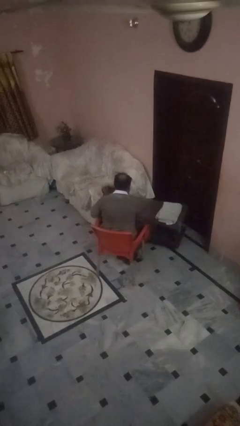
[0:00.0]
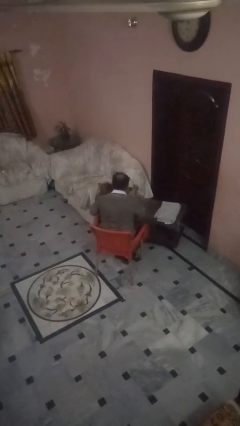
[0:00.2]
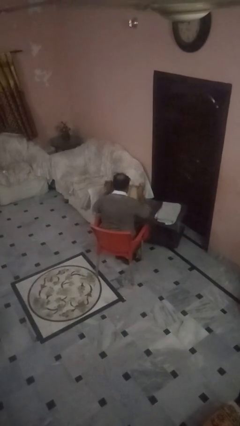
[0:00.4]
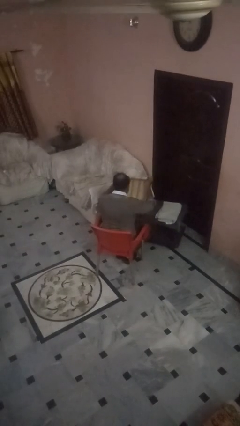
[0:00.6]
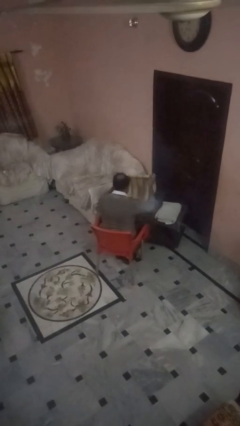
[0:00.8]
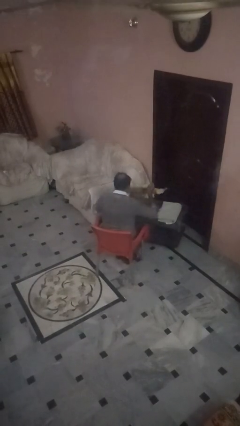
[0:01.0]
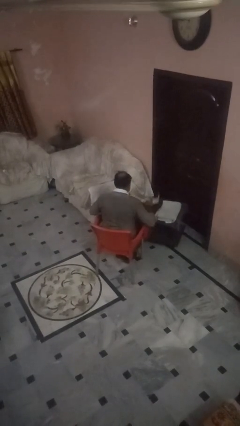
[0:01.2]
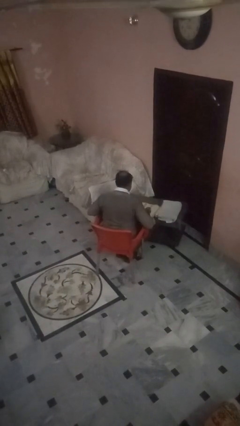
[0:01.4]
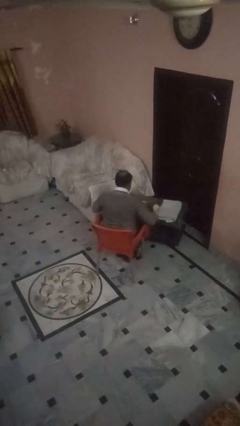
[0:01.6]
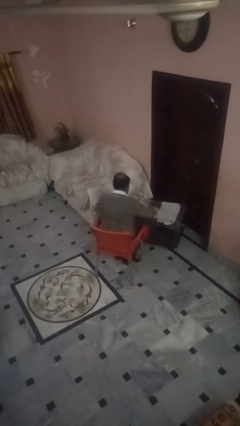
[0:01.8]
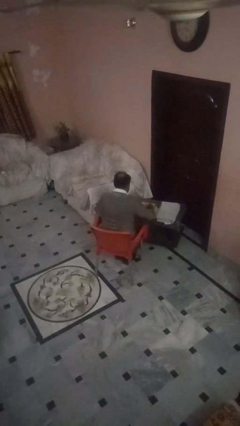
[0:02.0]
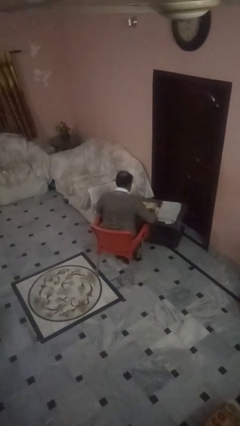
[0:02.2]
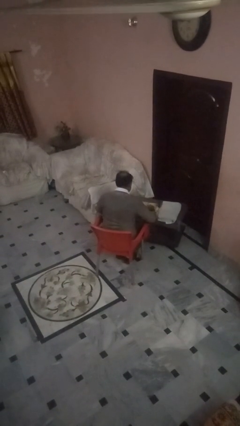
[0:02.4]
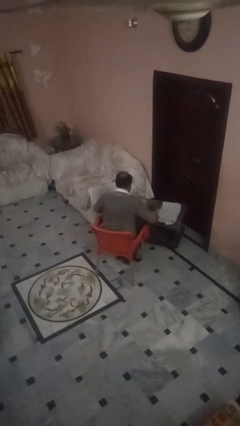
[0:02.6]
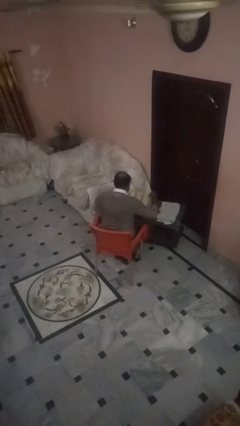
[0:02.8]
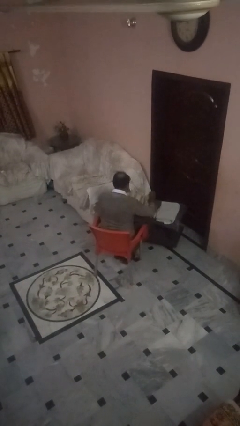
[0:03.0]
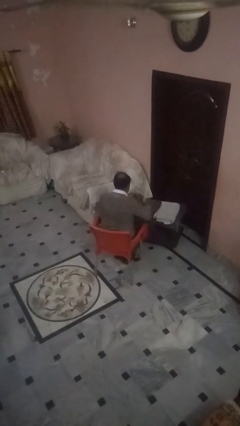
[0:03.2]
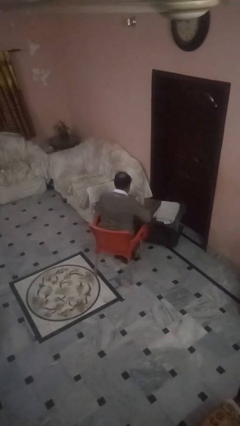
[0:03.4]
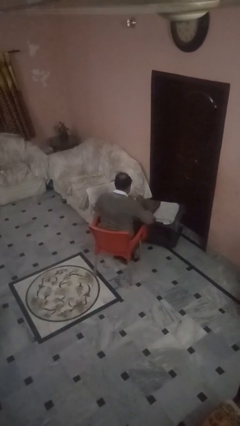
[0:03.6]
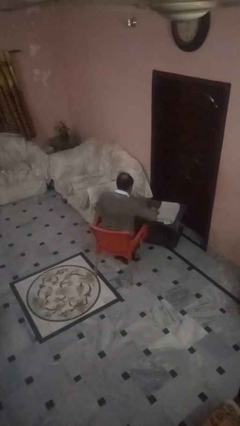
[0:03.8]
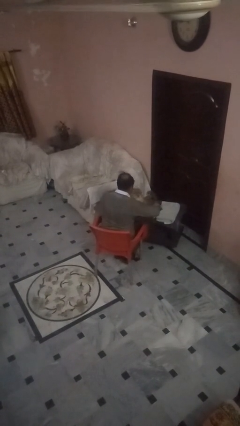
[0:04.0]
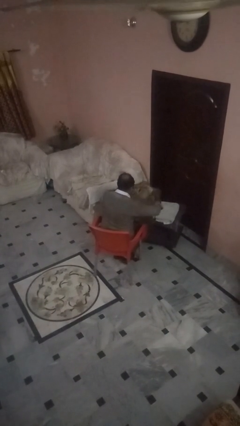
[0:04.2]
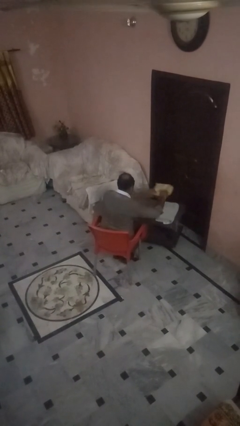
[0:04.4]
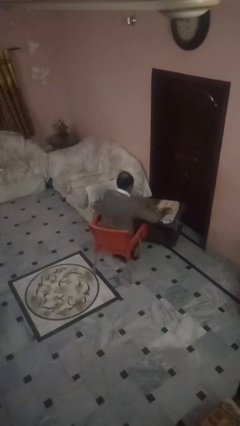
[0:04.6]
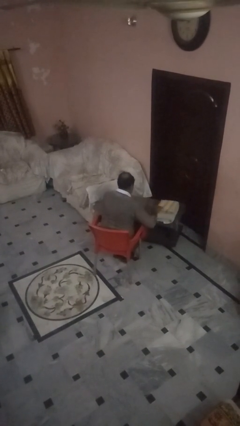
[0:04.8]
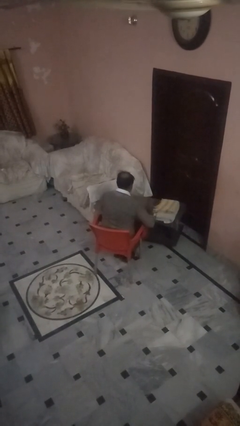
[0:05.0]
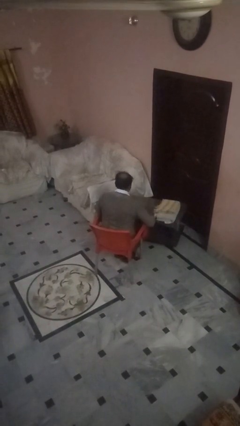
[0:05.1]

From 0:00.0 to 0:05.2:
person folds towel

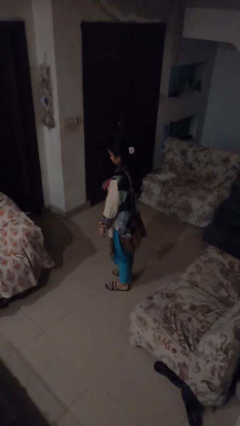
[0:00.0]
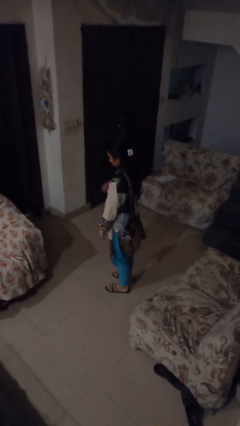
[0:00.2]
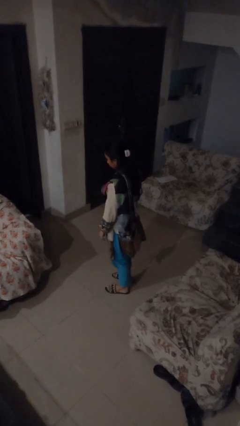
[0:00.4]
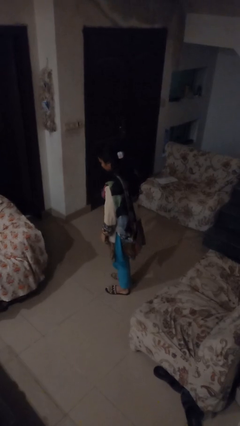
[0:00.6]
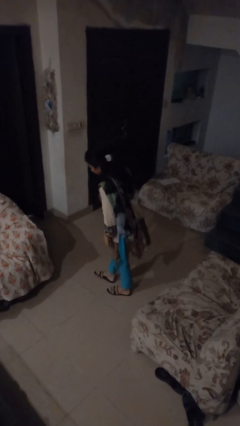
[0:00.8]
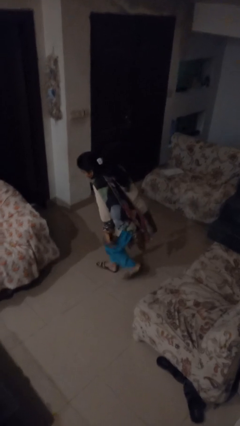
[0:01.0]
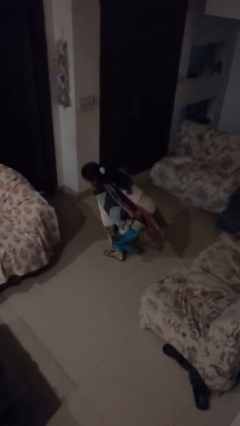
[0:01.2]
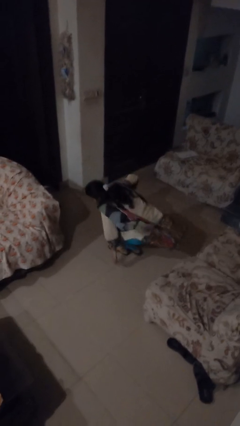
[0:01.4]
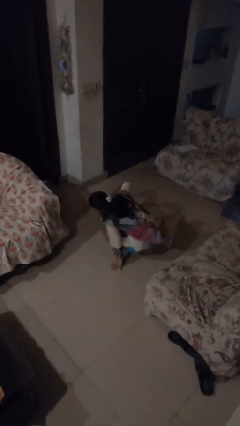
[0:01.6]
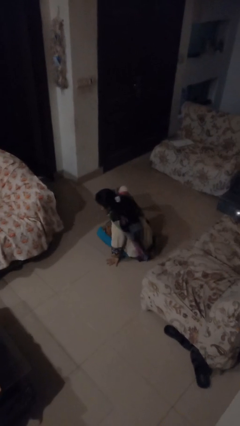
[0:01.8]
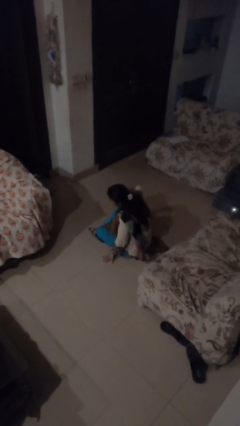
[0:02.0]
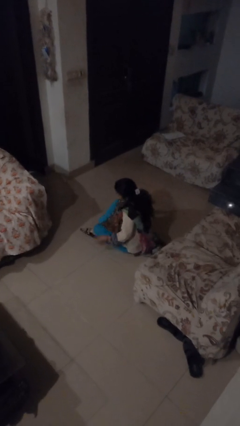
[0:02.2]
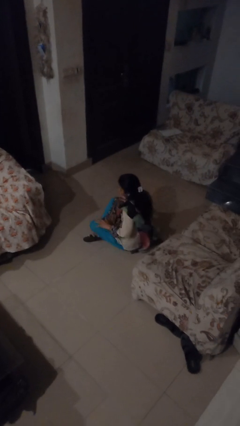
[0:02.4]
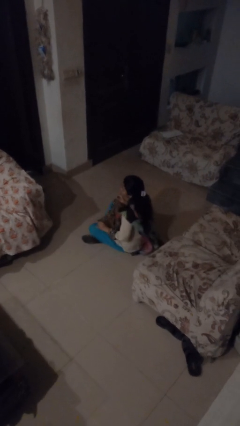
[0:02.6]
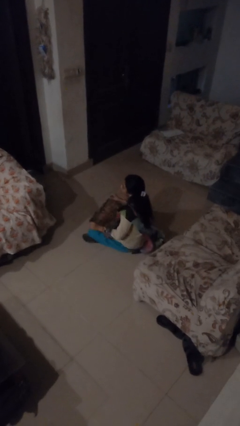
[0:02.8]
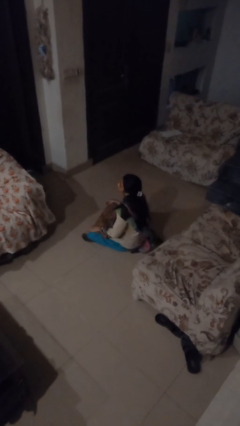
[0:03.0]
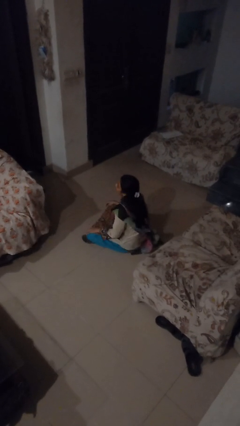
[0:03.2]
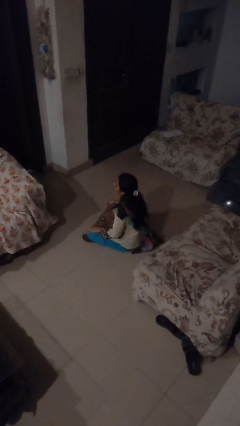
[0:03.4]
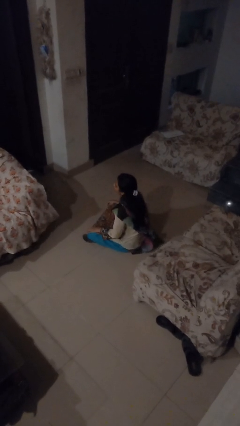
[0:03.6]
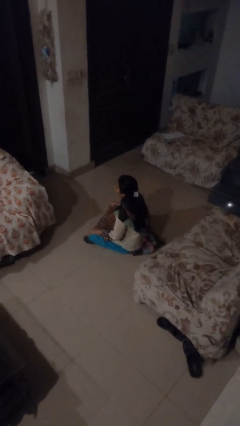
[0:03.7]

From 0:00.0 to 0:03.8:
person sits crisscross

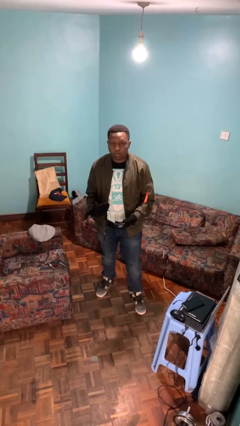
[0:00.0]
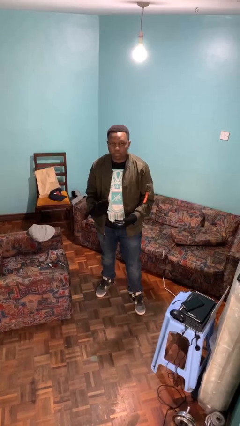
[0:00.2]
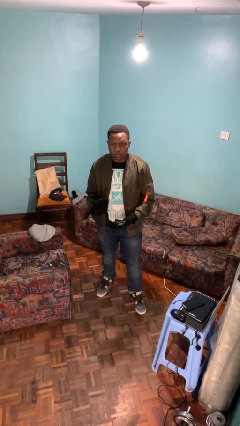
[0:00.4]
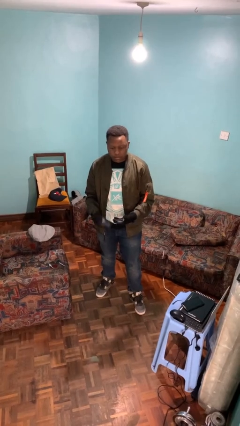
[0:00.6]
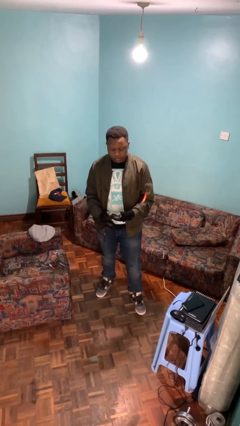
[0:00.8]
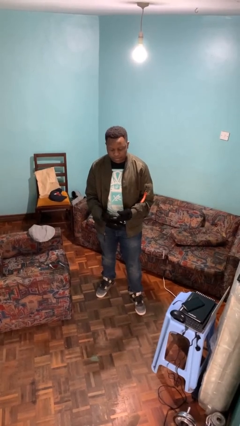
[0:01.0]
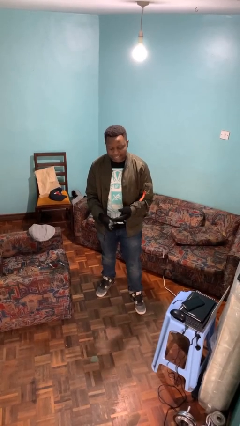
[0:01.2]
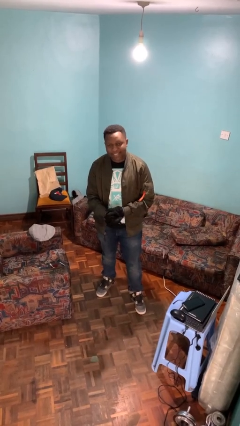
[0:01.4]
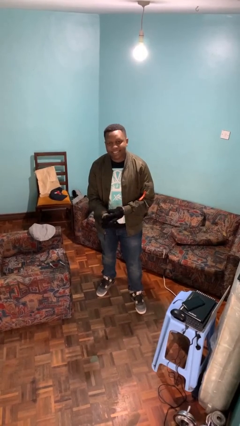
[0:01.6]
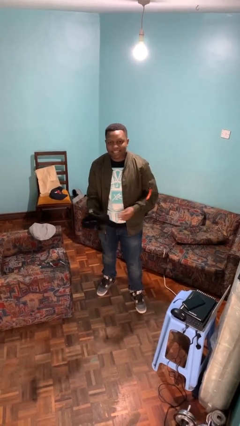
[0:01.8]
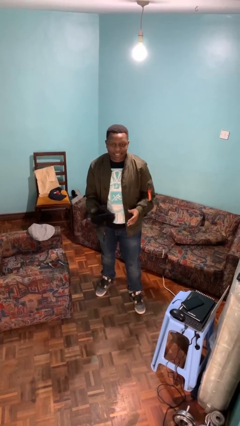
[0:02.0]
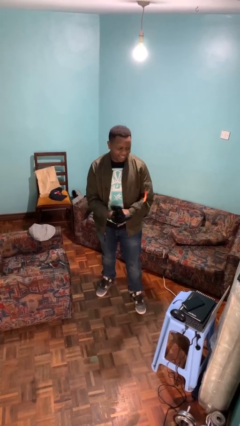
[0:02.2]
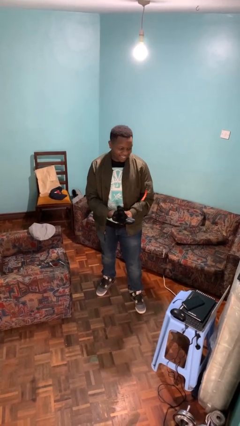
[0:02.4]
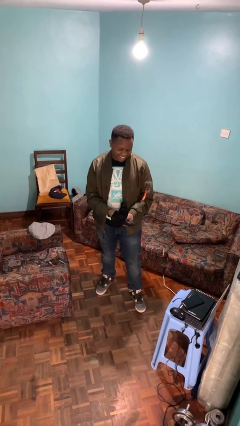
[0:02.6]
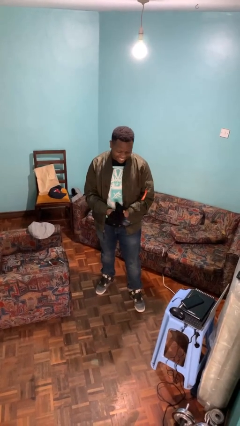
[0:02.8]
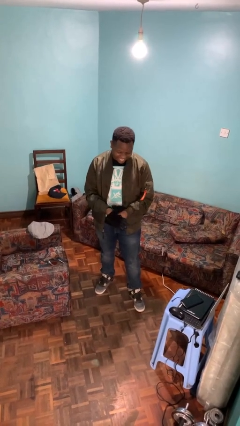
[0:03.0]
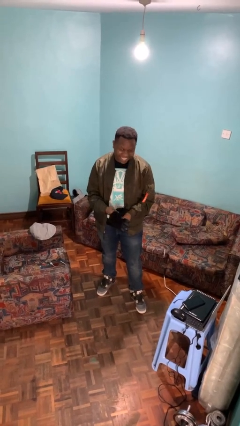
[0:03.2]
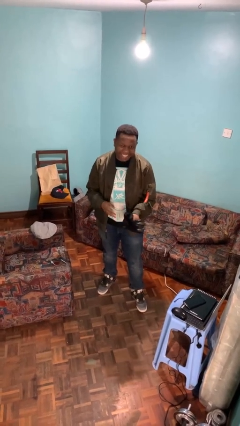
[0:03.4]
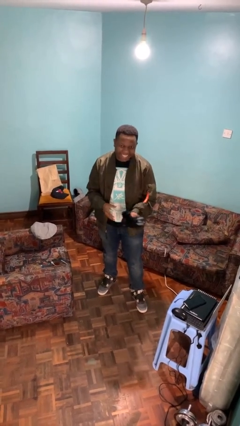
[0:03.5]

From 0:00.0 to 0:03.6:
person takes off gloves

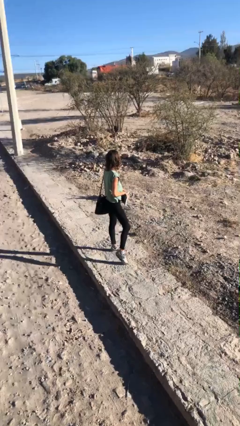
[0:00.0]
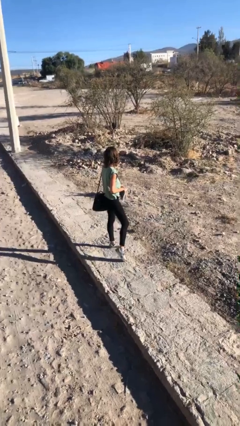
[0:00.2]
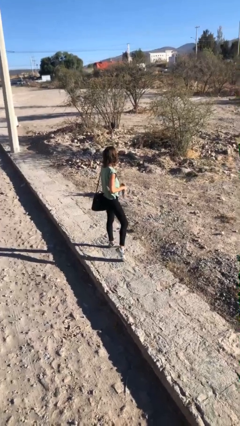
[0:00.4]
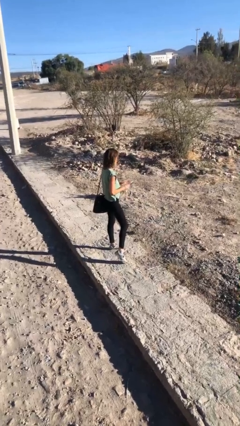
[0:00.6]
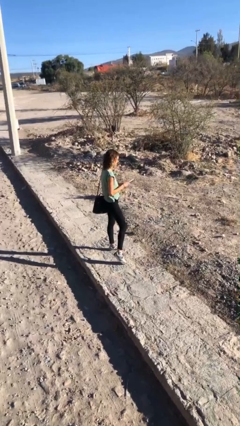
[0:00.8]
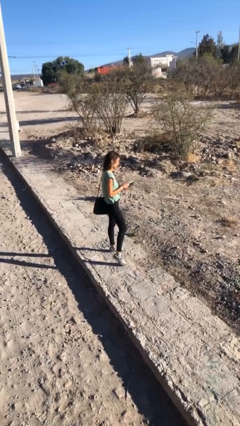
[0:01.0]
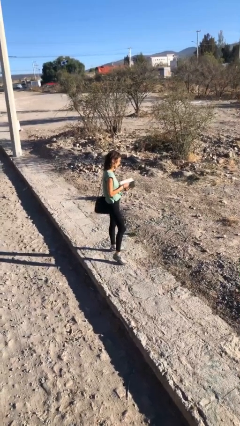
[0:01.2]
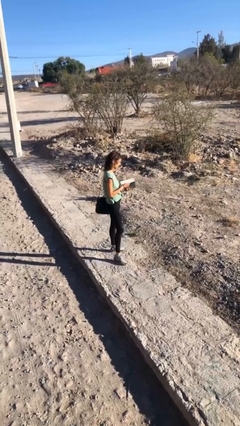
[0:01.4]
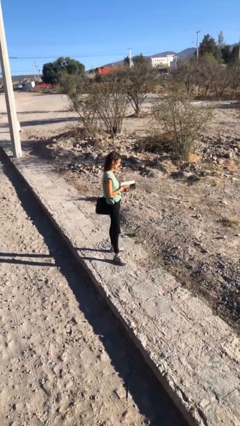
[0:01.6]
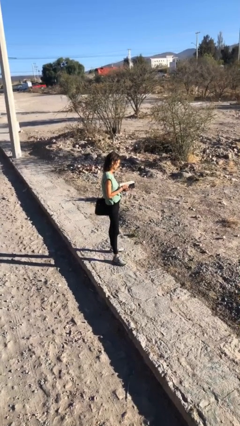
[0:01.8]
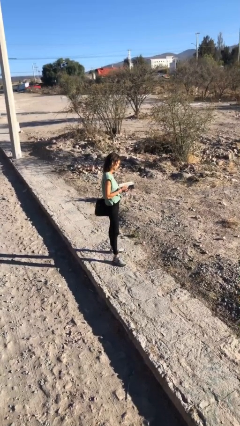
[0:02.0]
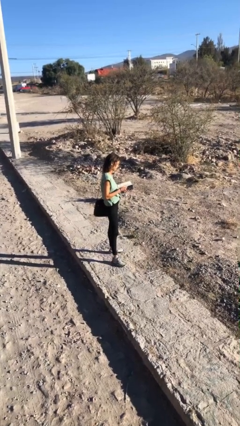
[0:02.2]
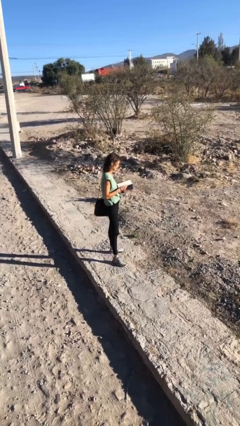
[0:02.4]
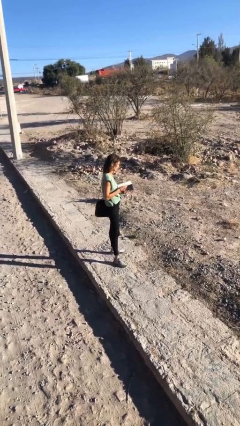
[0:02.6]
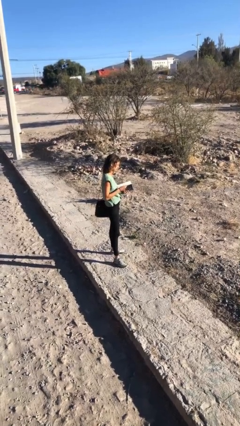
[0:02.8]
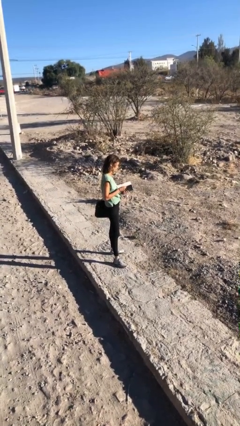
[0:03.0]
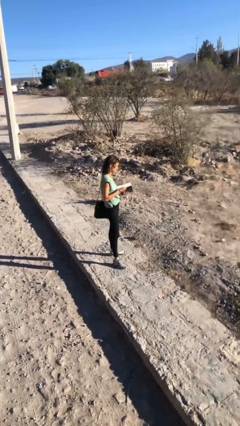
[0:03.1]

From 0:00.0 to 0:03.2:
person reads document

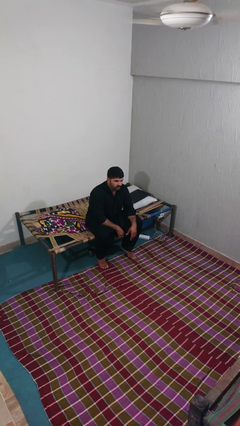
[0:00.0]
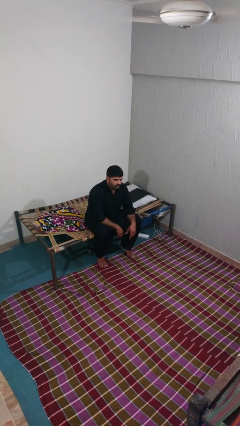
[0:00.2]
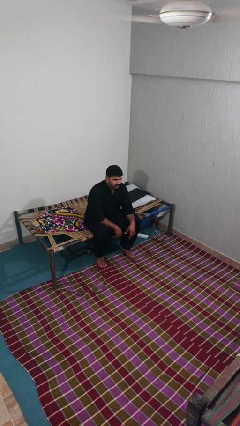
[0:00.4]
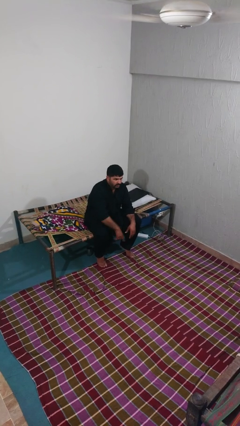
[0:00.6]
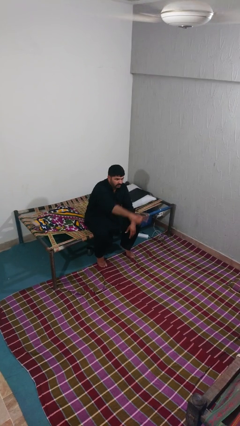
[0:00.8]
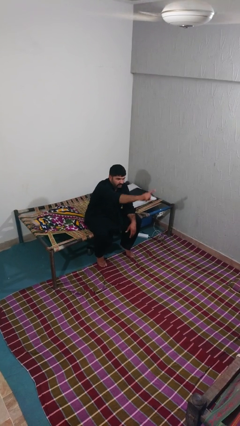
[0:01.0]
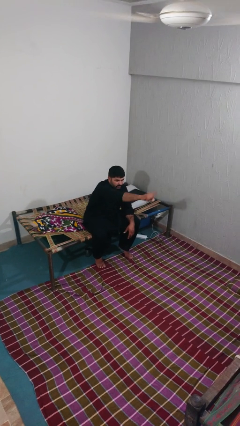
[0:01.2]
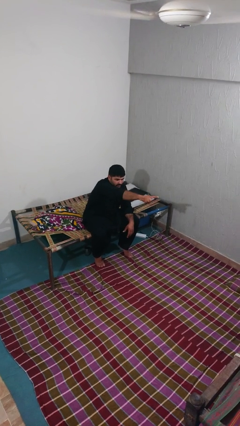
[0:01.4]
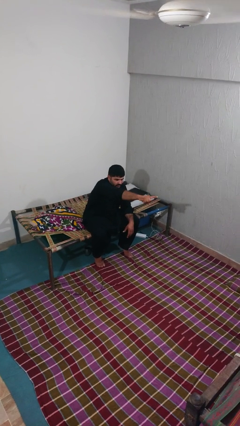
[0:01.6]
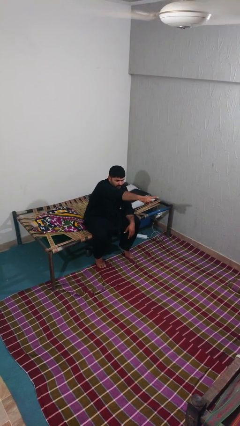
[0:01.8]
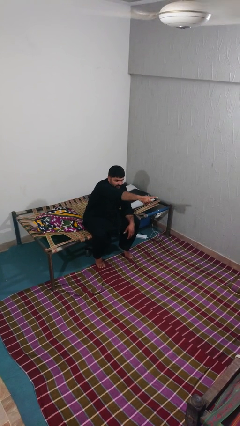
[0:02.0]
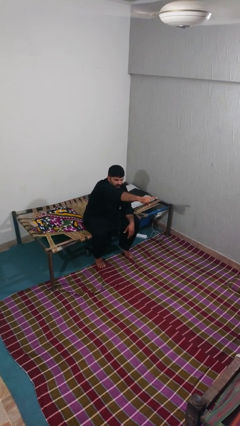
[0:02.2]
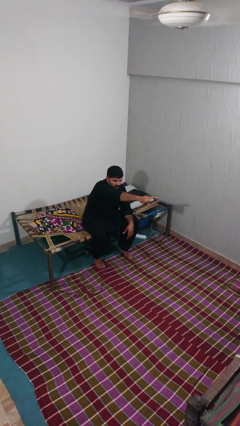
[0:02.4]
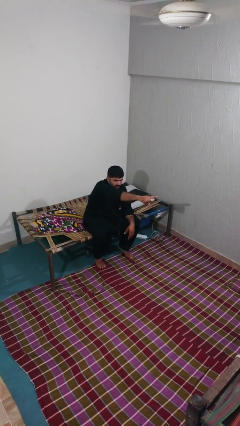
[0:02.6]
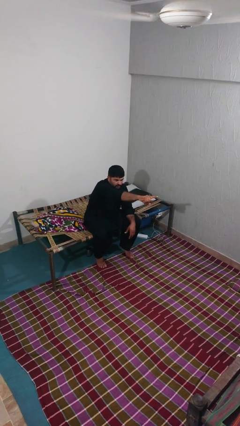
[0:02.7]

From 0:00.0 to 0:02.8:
person points at person
